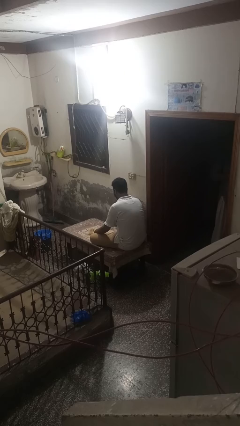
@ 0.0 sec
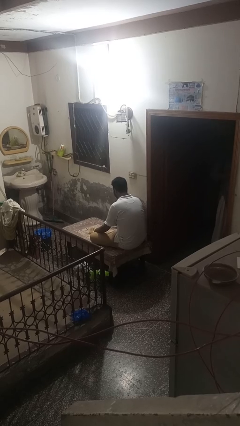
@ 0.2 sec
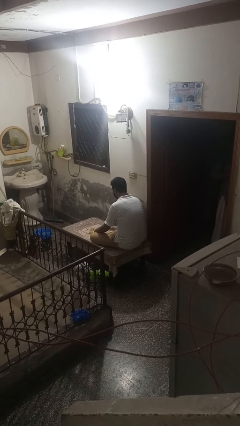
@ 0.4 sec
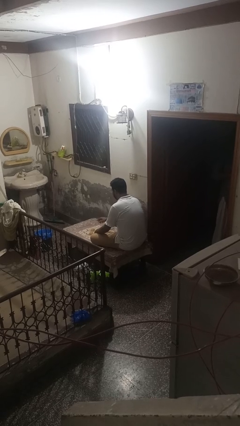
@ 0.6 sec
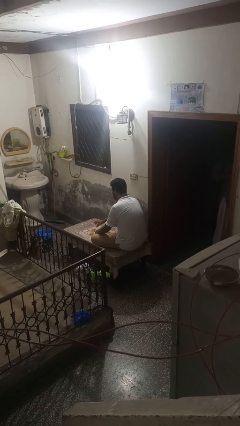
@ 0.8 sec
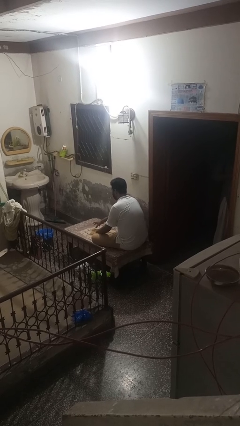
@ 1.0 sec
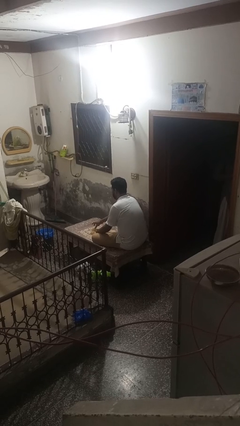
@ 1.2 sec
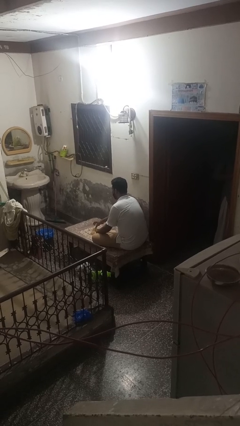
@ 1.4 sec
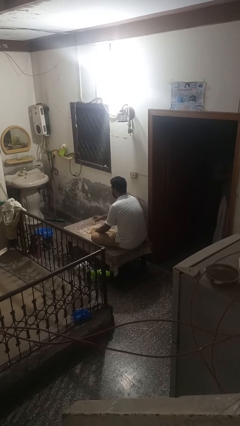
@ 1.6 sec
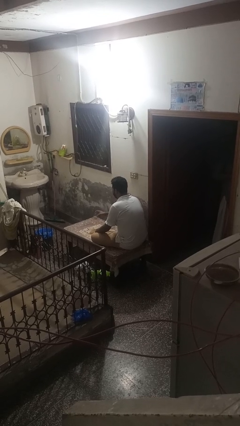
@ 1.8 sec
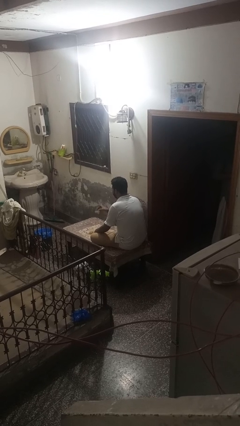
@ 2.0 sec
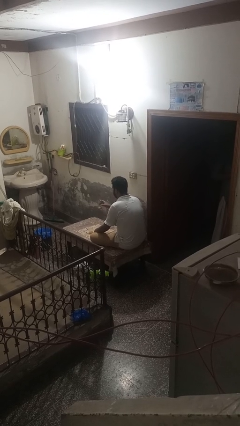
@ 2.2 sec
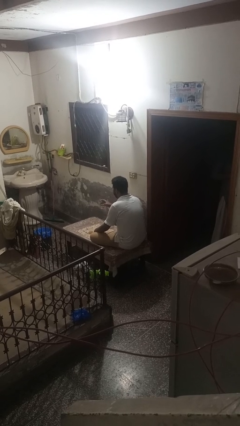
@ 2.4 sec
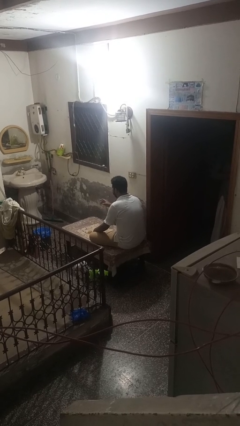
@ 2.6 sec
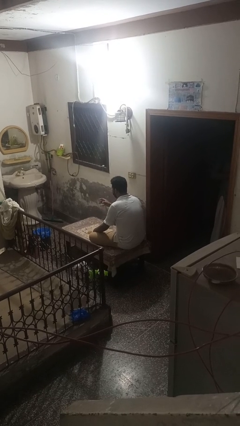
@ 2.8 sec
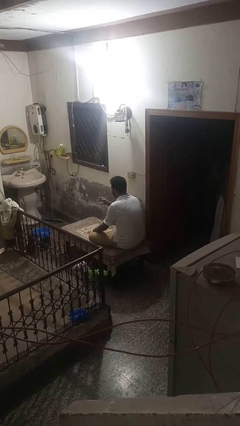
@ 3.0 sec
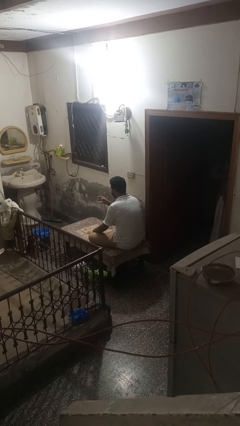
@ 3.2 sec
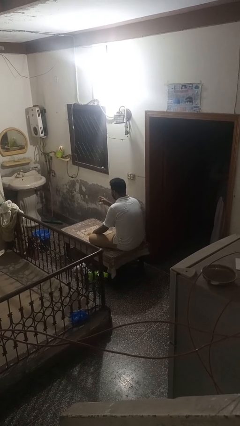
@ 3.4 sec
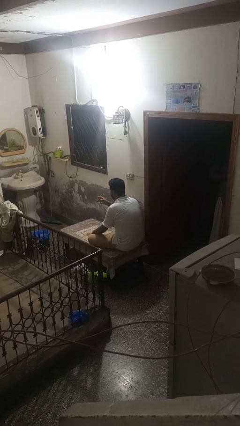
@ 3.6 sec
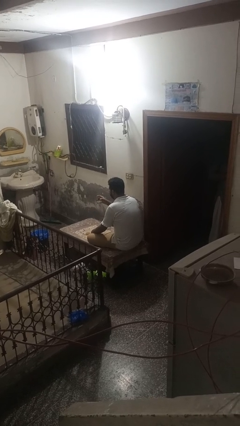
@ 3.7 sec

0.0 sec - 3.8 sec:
person picks up object from table

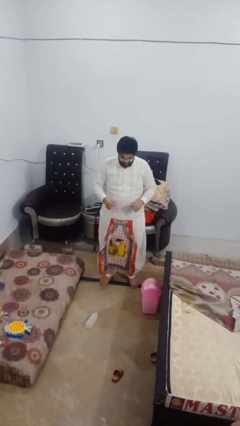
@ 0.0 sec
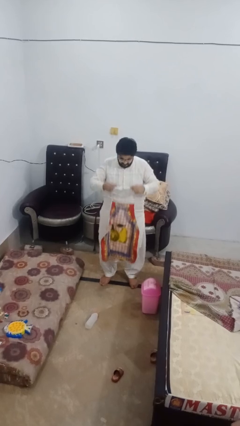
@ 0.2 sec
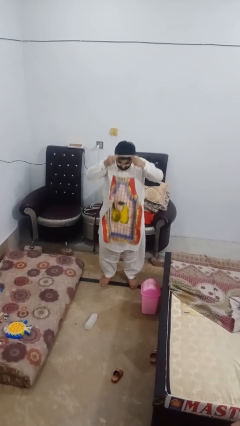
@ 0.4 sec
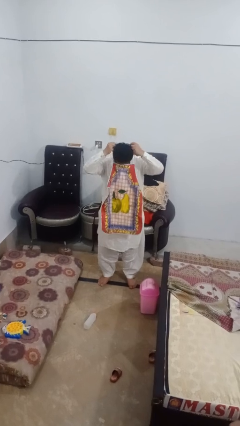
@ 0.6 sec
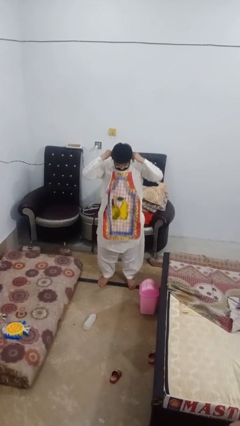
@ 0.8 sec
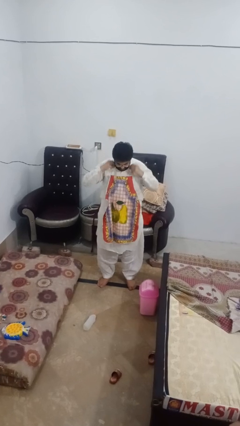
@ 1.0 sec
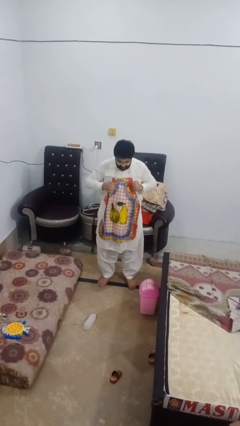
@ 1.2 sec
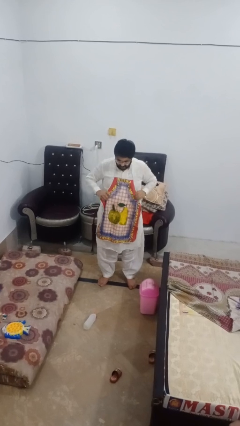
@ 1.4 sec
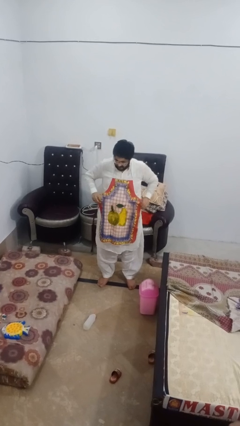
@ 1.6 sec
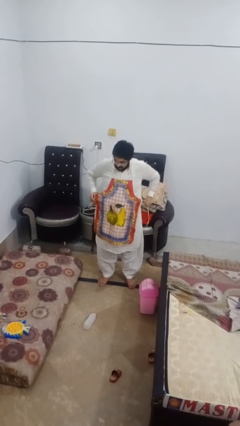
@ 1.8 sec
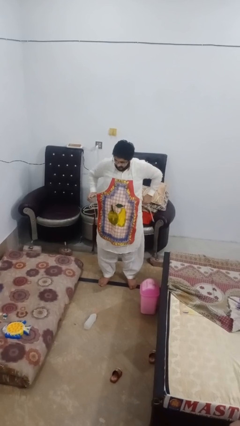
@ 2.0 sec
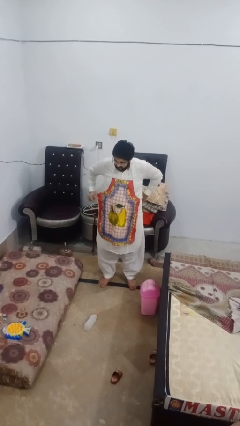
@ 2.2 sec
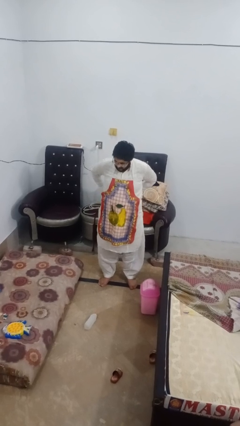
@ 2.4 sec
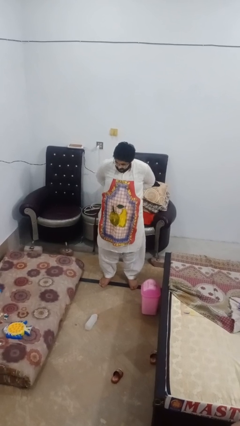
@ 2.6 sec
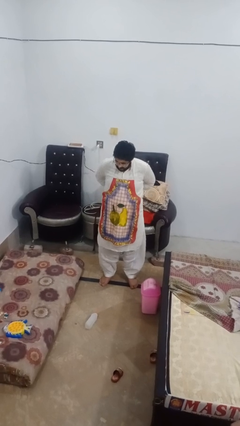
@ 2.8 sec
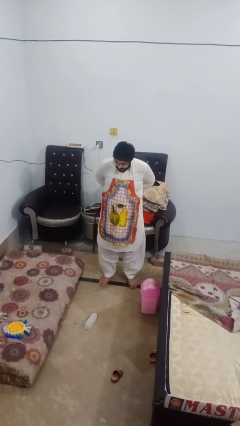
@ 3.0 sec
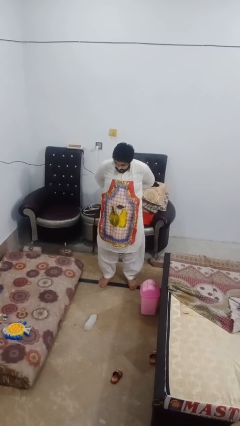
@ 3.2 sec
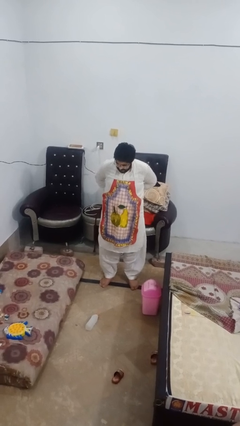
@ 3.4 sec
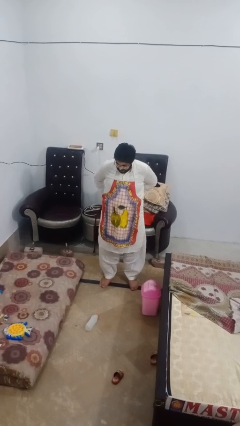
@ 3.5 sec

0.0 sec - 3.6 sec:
person puts on apron

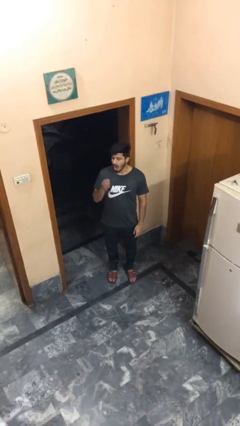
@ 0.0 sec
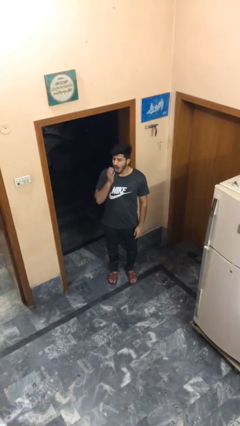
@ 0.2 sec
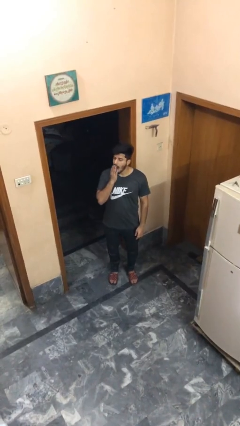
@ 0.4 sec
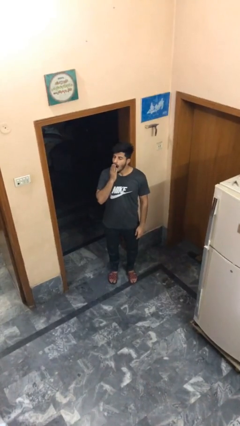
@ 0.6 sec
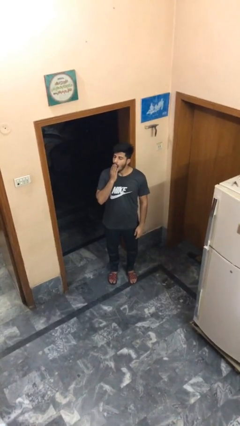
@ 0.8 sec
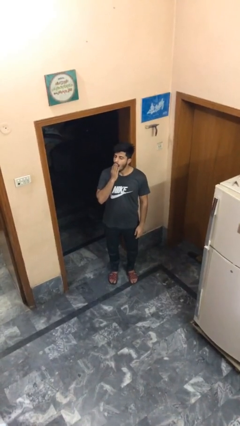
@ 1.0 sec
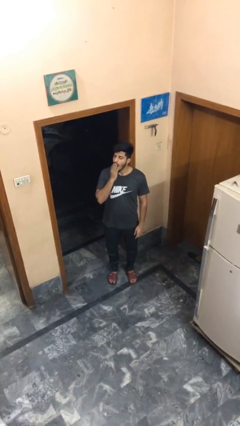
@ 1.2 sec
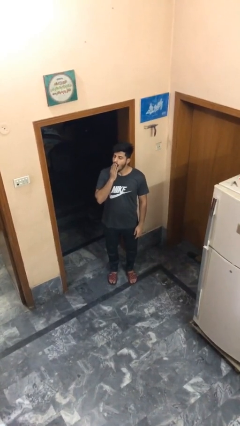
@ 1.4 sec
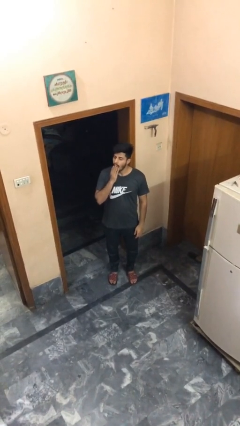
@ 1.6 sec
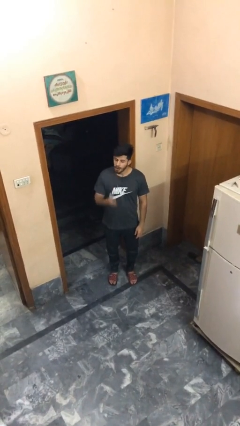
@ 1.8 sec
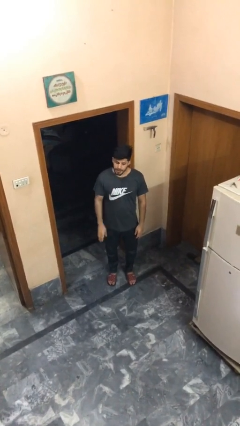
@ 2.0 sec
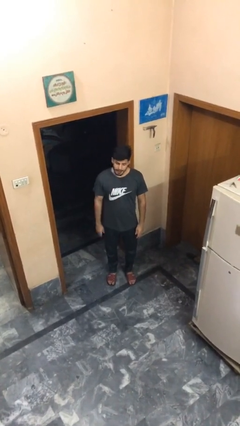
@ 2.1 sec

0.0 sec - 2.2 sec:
person yawns

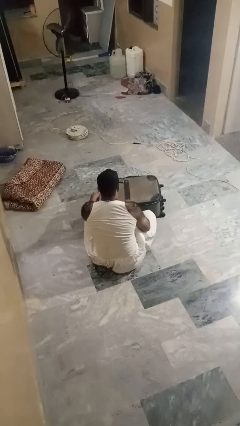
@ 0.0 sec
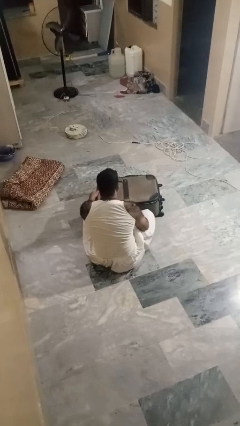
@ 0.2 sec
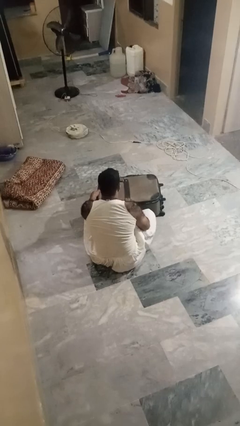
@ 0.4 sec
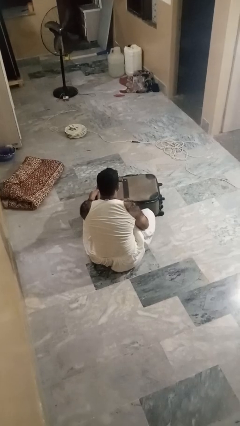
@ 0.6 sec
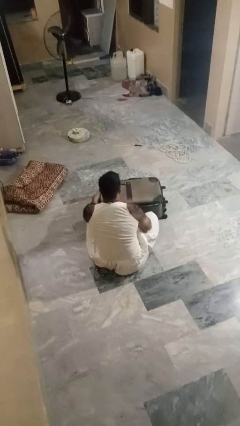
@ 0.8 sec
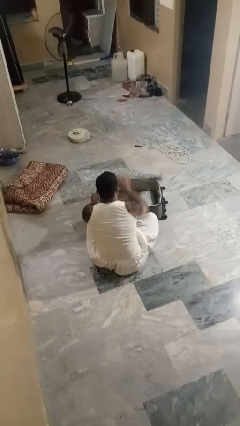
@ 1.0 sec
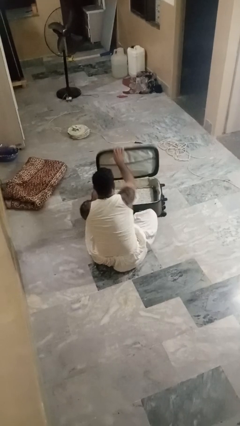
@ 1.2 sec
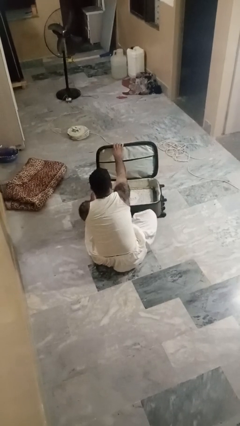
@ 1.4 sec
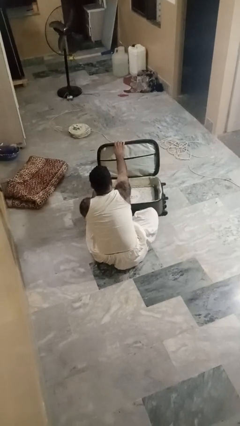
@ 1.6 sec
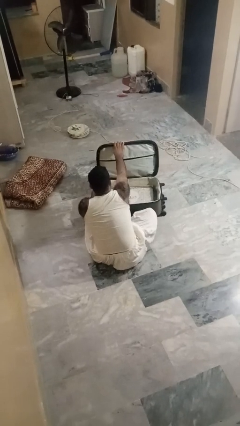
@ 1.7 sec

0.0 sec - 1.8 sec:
person opens suitcase

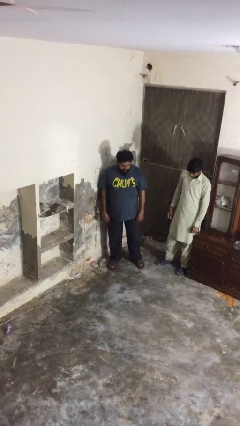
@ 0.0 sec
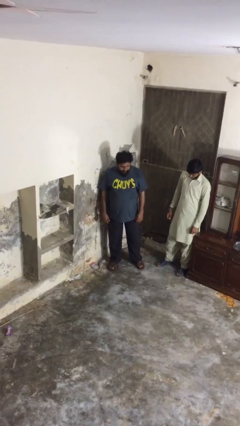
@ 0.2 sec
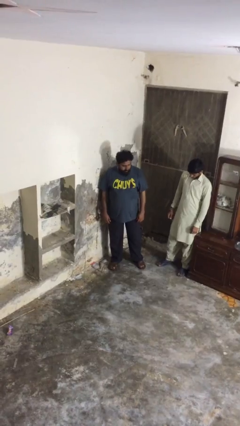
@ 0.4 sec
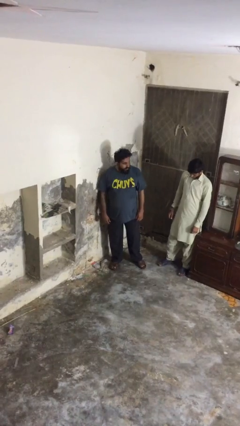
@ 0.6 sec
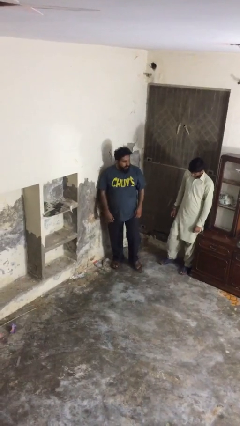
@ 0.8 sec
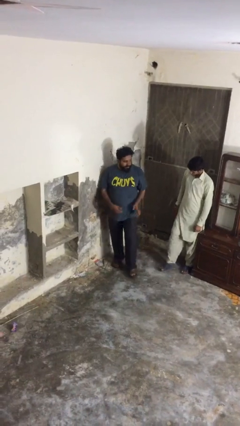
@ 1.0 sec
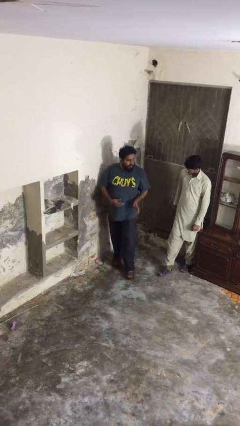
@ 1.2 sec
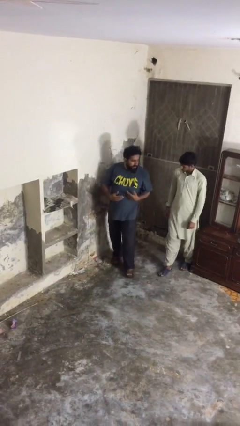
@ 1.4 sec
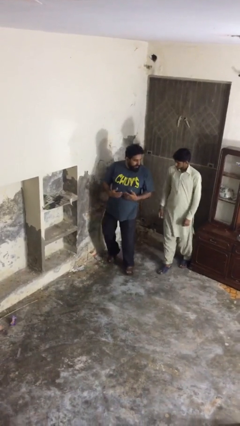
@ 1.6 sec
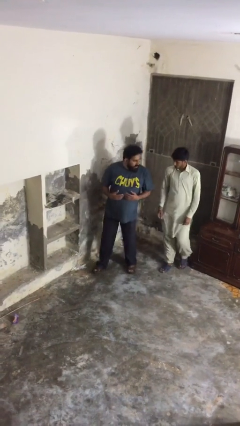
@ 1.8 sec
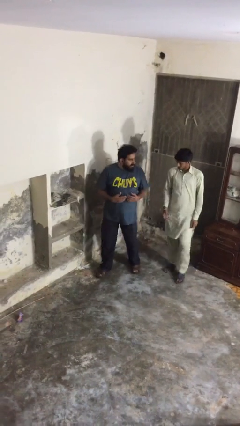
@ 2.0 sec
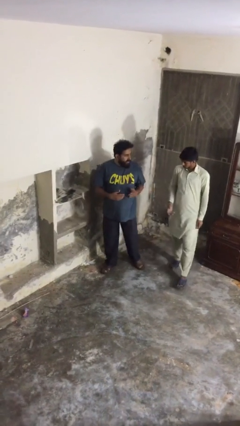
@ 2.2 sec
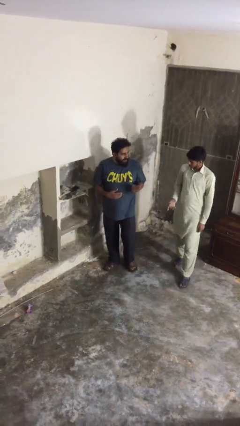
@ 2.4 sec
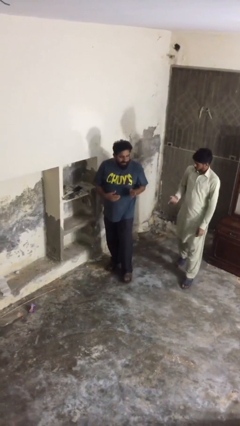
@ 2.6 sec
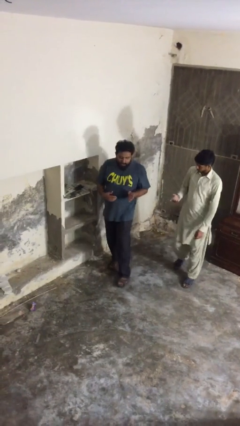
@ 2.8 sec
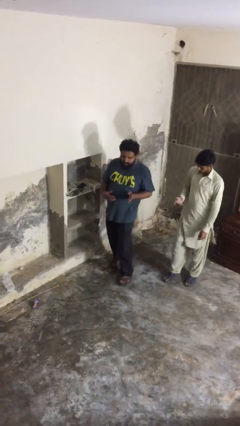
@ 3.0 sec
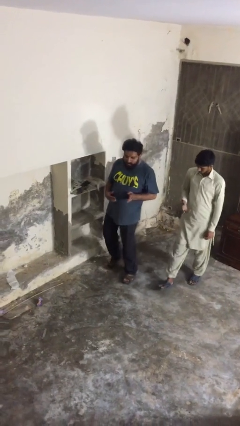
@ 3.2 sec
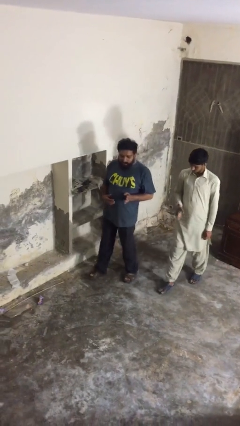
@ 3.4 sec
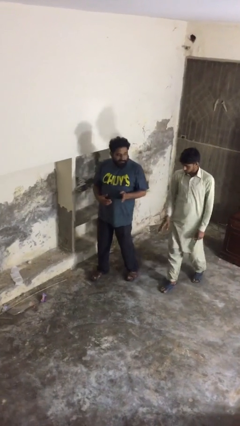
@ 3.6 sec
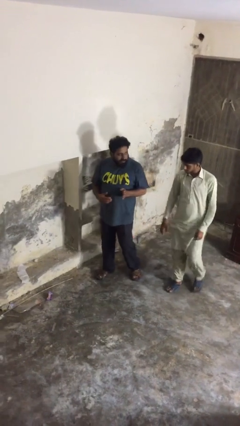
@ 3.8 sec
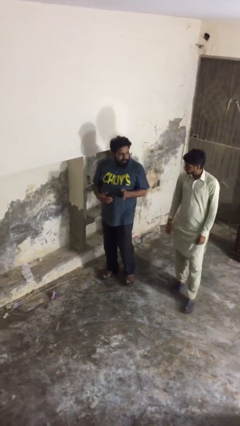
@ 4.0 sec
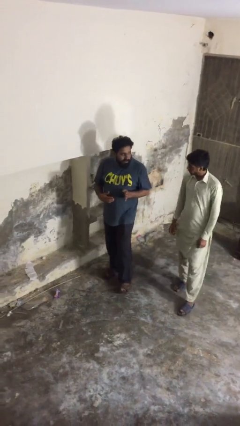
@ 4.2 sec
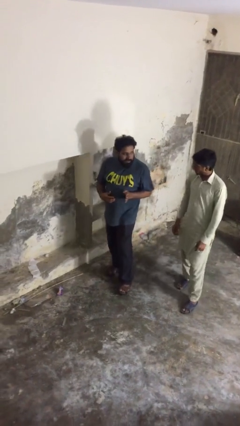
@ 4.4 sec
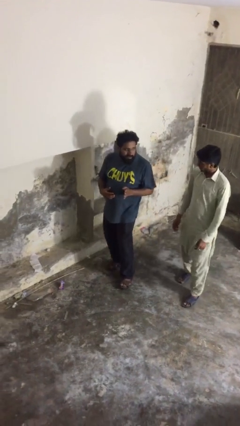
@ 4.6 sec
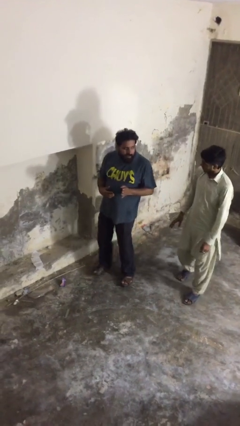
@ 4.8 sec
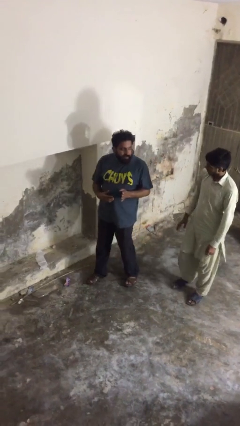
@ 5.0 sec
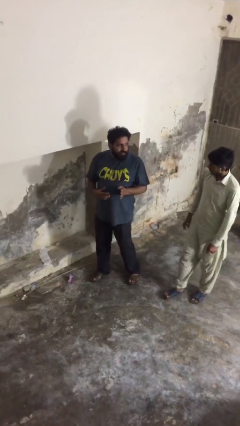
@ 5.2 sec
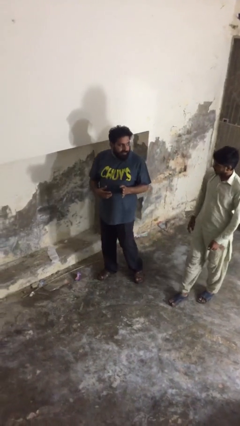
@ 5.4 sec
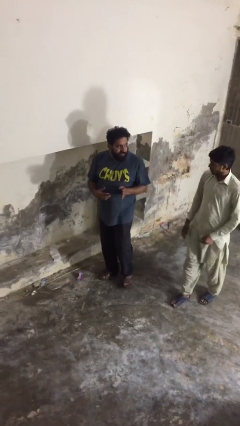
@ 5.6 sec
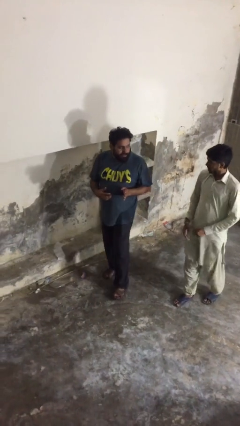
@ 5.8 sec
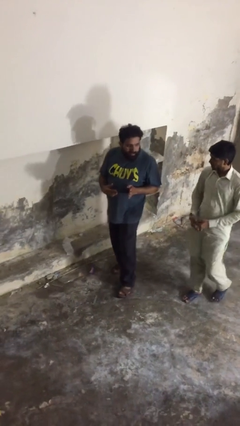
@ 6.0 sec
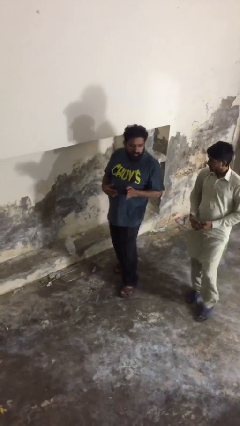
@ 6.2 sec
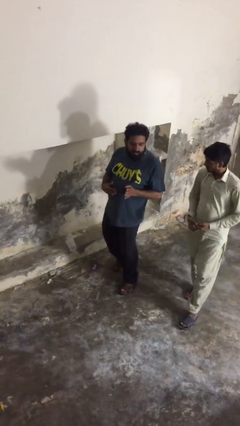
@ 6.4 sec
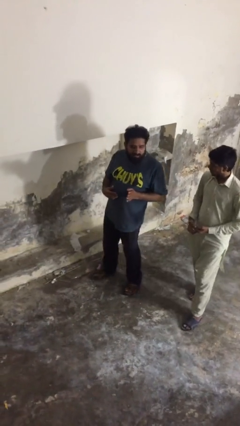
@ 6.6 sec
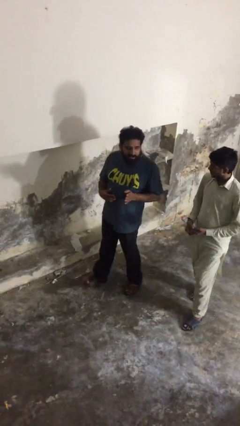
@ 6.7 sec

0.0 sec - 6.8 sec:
person talks to person
